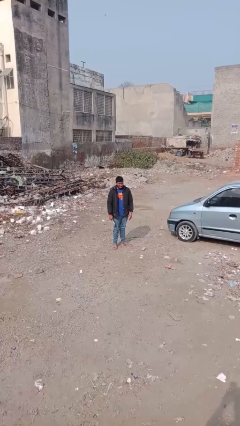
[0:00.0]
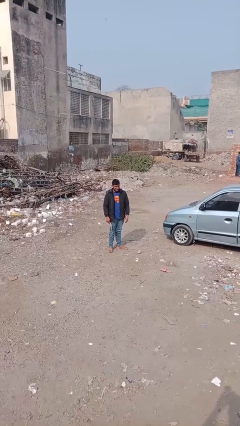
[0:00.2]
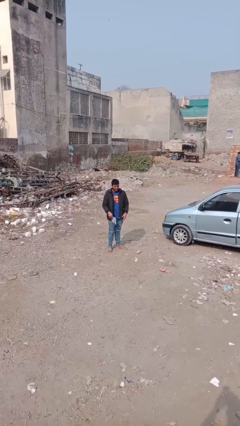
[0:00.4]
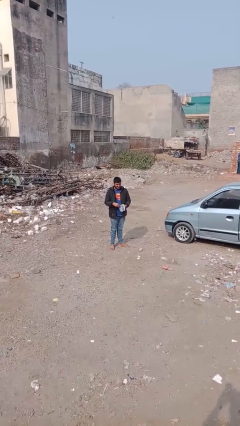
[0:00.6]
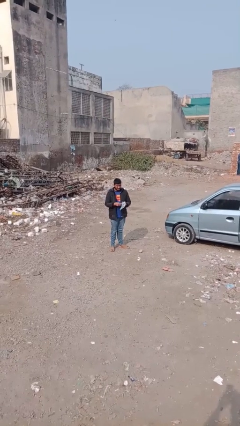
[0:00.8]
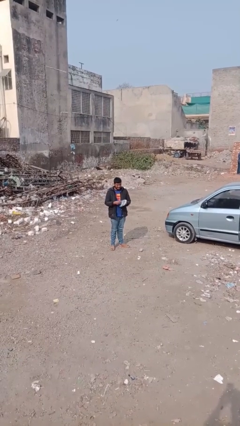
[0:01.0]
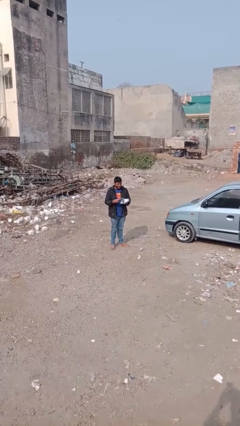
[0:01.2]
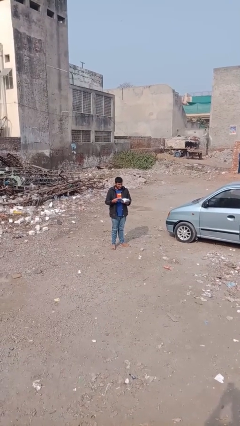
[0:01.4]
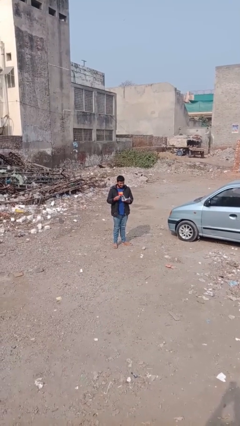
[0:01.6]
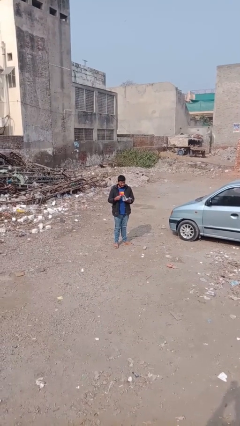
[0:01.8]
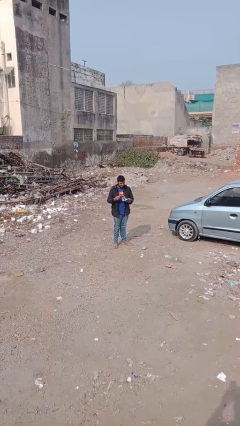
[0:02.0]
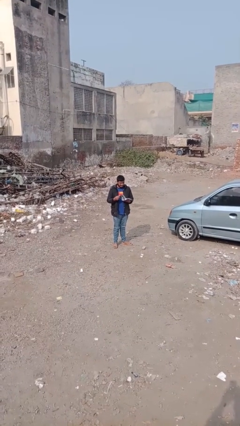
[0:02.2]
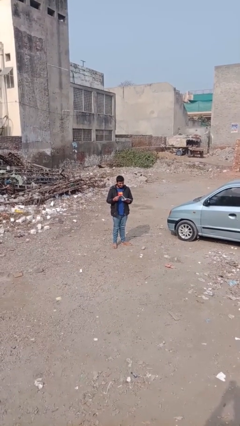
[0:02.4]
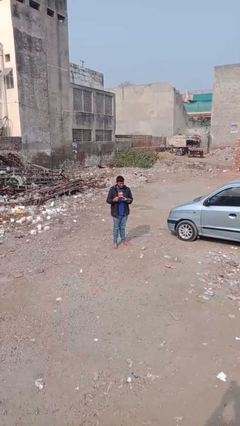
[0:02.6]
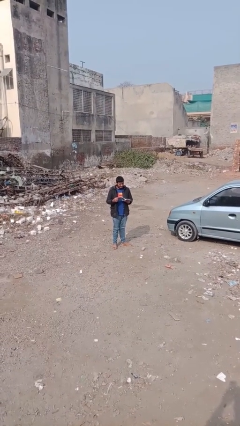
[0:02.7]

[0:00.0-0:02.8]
person reads document

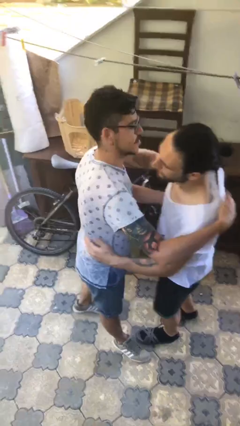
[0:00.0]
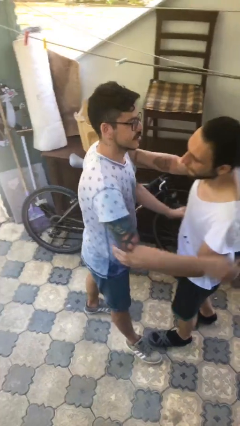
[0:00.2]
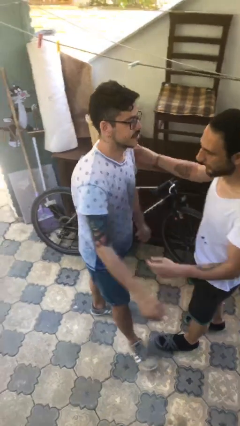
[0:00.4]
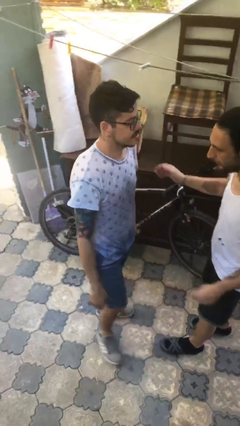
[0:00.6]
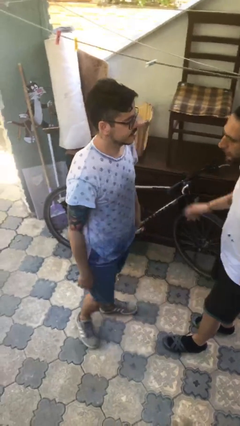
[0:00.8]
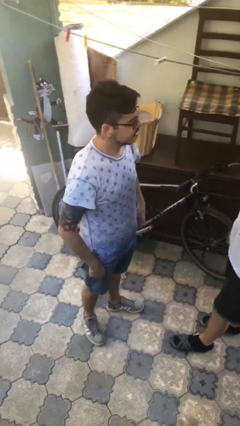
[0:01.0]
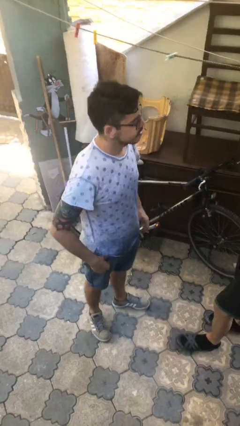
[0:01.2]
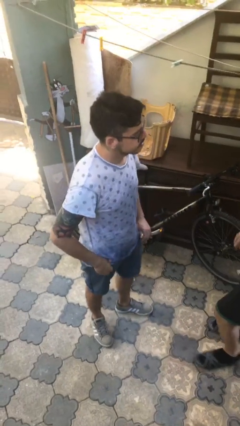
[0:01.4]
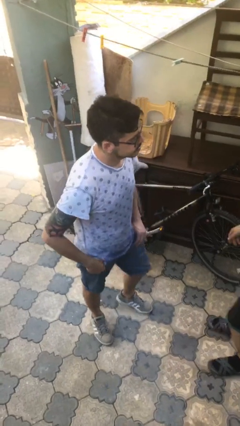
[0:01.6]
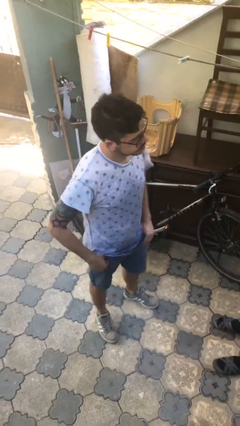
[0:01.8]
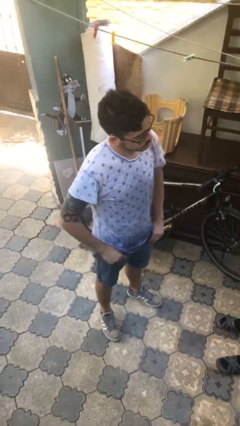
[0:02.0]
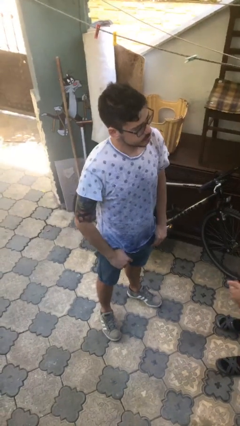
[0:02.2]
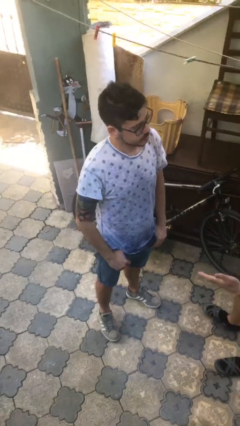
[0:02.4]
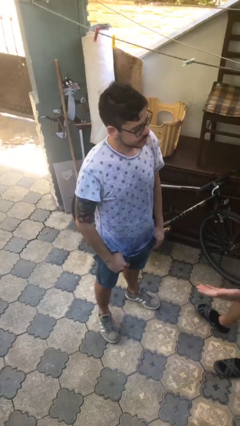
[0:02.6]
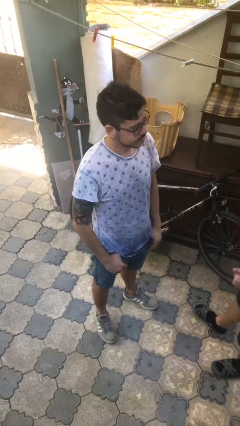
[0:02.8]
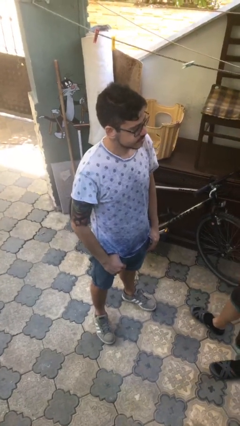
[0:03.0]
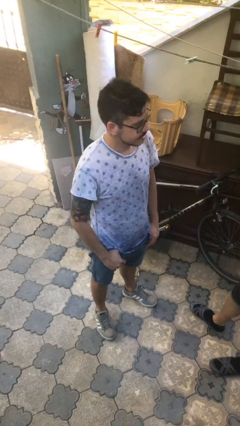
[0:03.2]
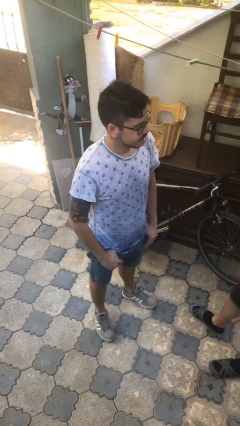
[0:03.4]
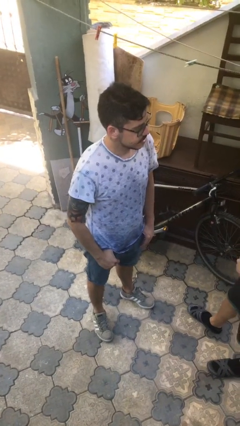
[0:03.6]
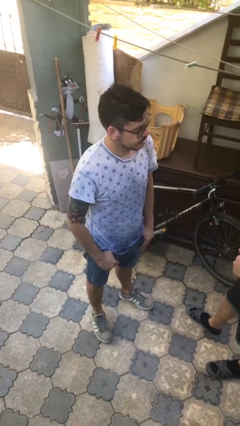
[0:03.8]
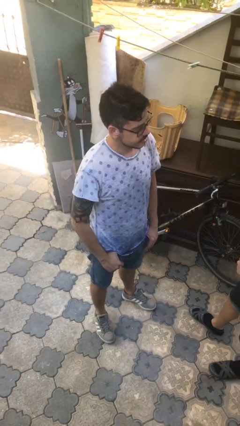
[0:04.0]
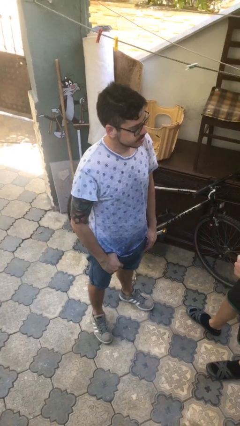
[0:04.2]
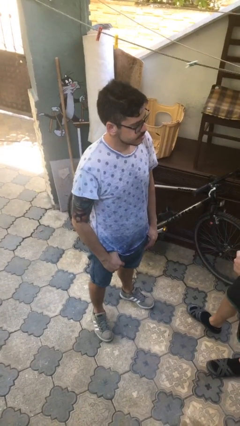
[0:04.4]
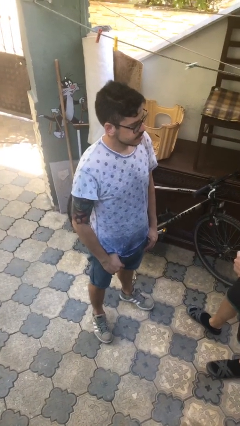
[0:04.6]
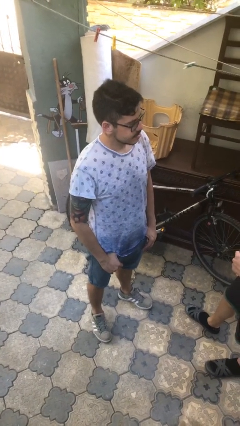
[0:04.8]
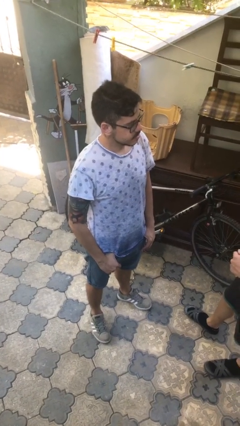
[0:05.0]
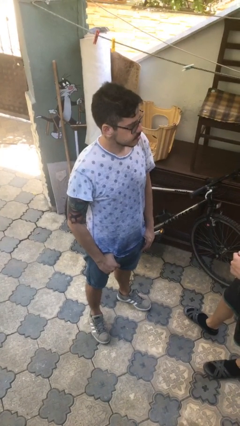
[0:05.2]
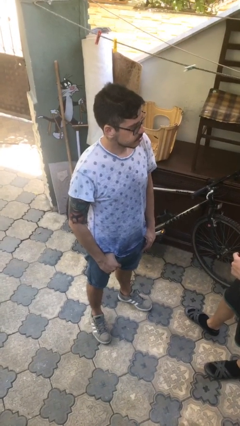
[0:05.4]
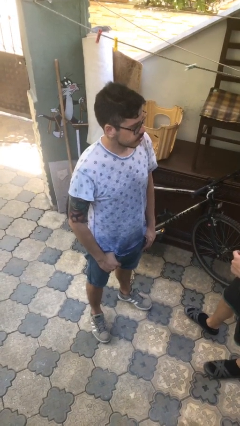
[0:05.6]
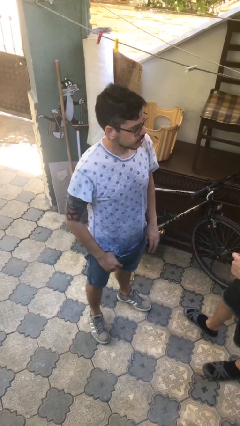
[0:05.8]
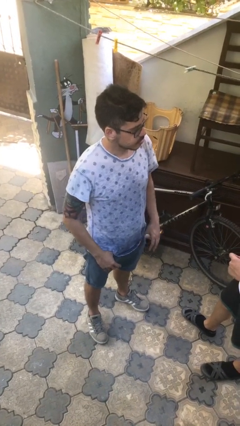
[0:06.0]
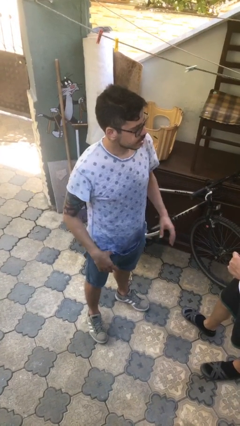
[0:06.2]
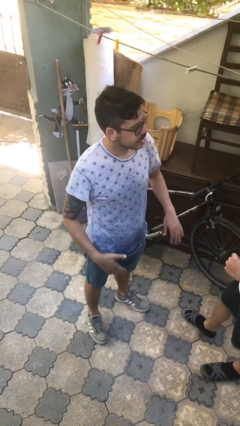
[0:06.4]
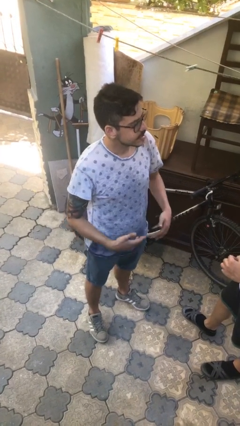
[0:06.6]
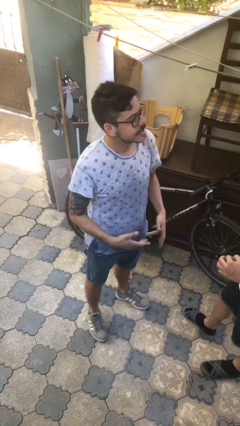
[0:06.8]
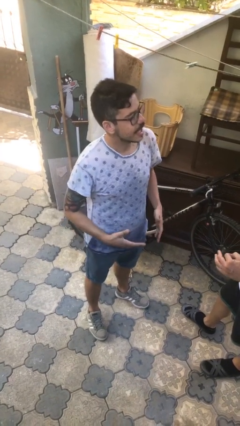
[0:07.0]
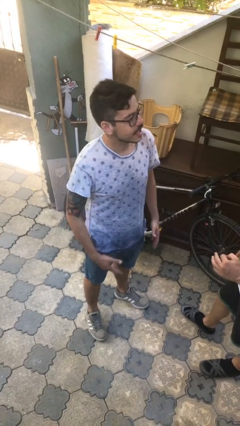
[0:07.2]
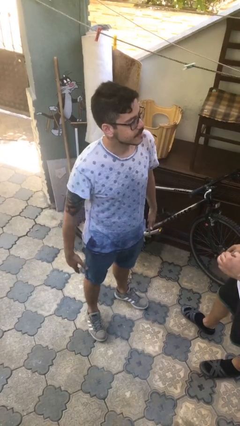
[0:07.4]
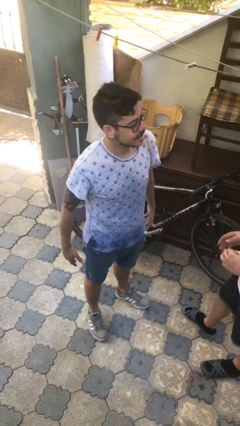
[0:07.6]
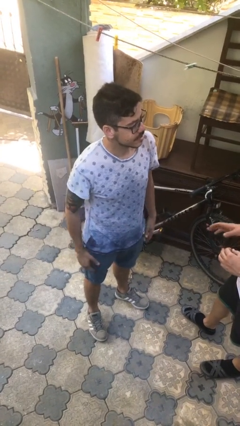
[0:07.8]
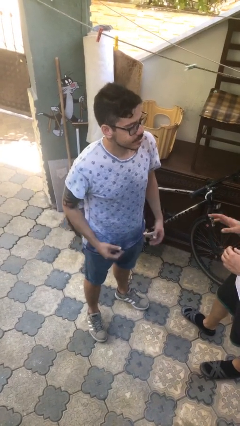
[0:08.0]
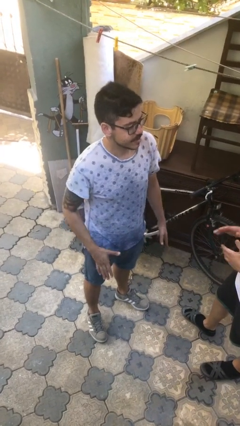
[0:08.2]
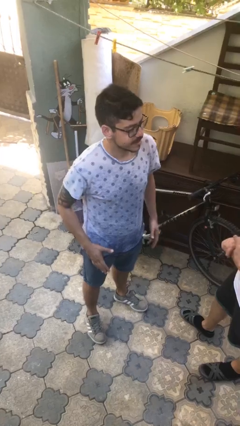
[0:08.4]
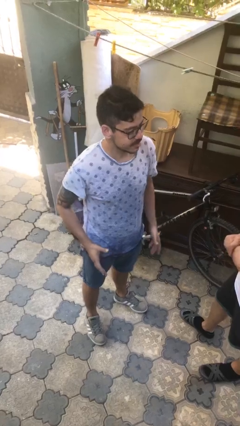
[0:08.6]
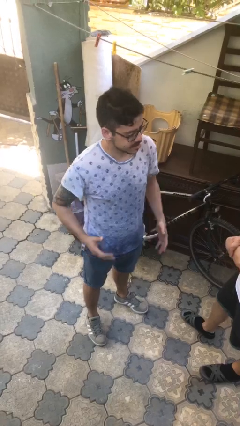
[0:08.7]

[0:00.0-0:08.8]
person talks to person

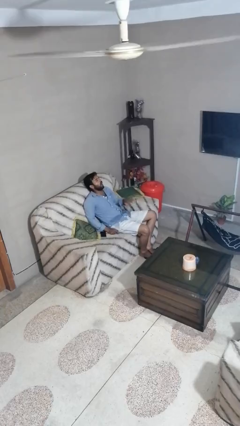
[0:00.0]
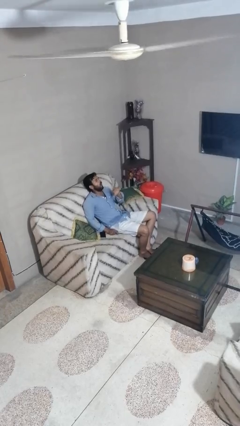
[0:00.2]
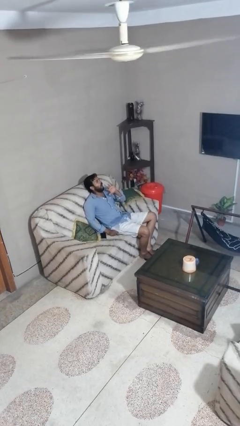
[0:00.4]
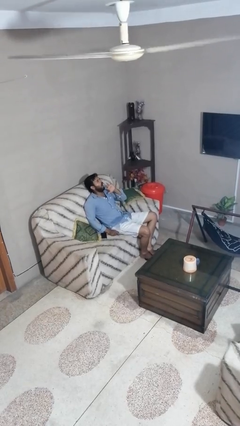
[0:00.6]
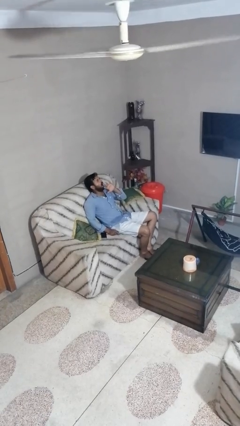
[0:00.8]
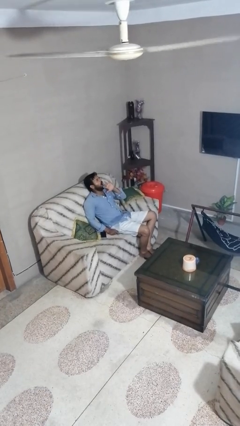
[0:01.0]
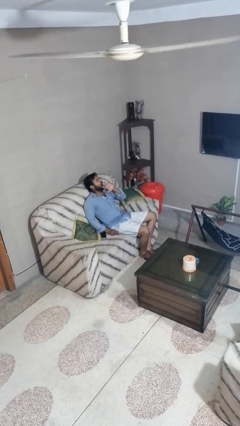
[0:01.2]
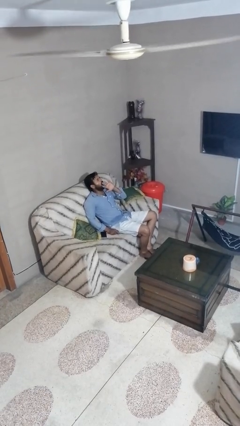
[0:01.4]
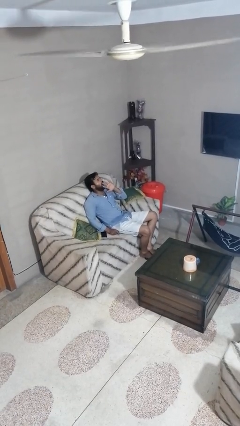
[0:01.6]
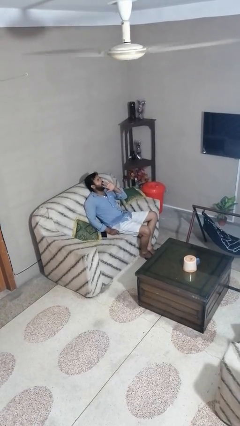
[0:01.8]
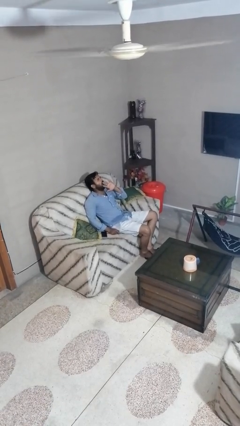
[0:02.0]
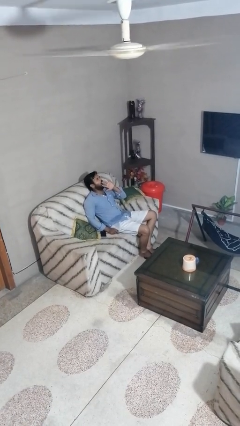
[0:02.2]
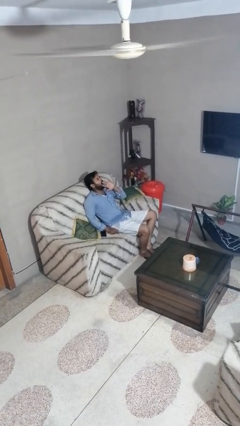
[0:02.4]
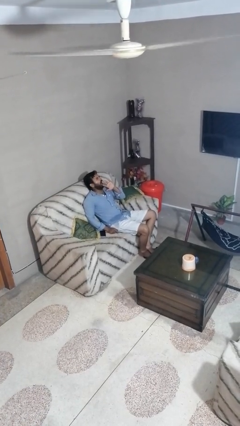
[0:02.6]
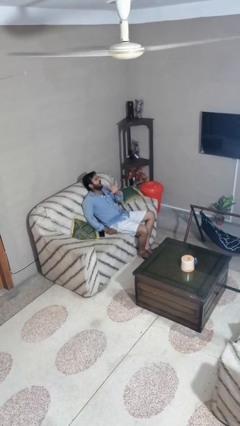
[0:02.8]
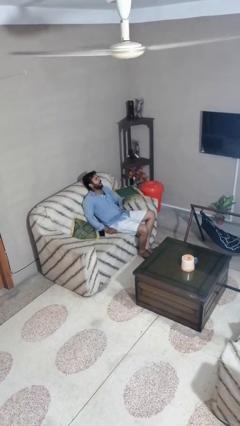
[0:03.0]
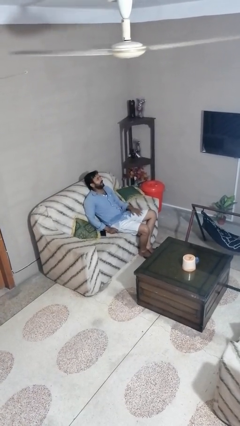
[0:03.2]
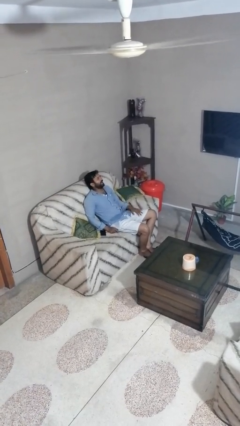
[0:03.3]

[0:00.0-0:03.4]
person yawns

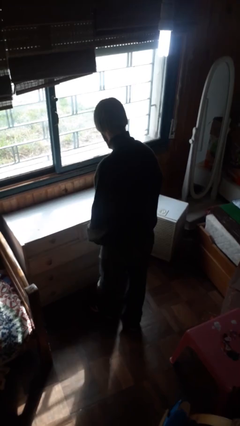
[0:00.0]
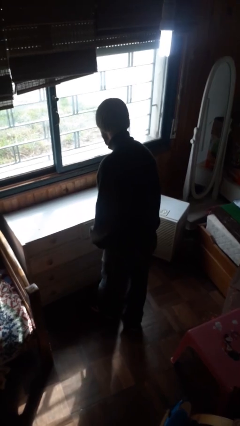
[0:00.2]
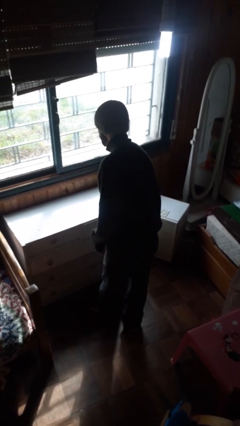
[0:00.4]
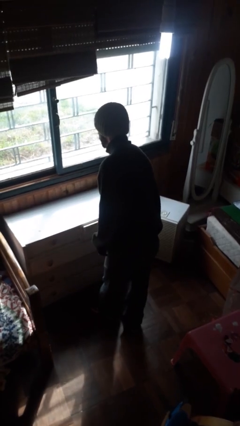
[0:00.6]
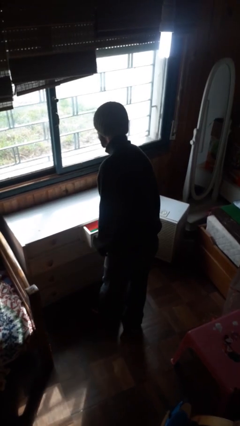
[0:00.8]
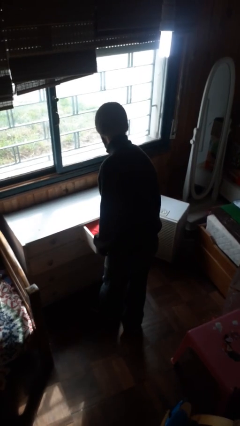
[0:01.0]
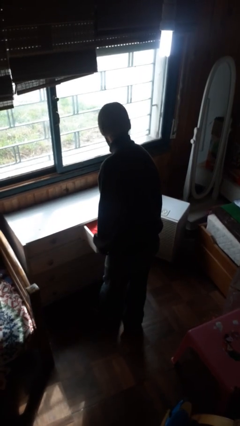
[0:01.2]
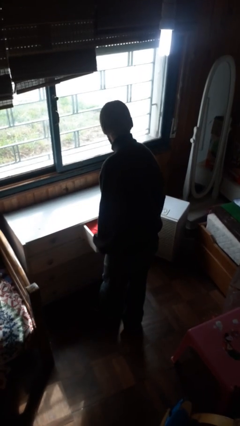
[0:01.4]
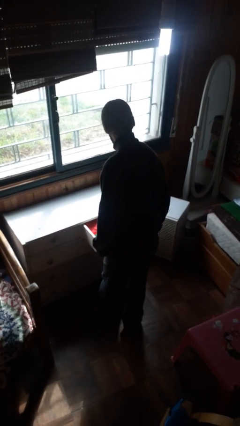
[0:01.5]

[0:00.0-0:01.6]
person opens dresser drawer

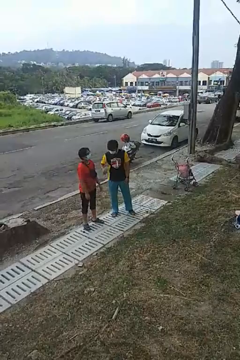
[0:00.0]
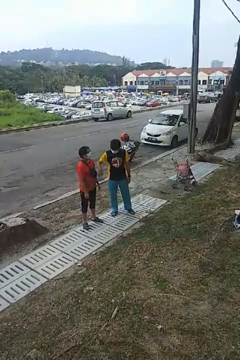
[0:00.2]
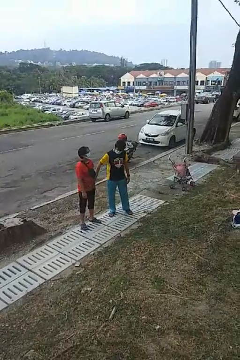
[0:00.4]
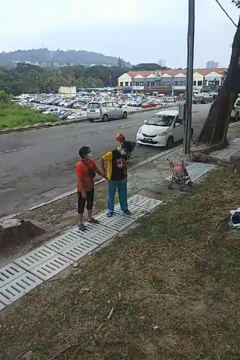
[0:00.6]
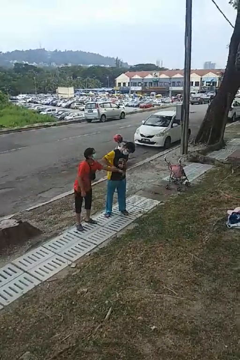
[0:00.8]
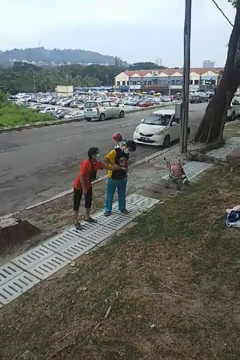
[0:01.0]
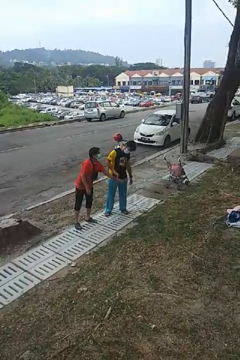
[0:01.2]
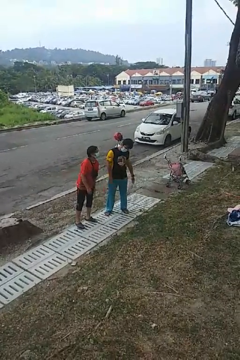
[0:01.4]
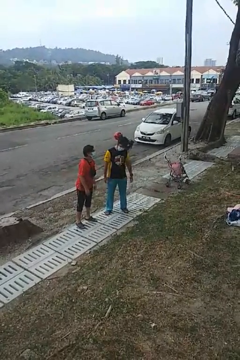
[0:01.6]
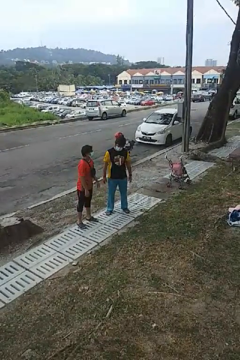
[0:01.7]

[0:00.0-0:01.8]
person grabs person by forearm
